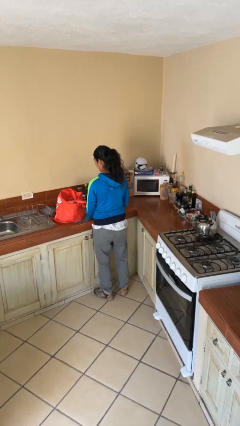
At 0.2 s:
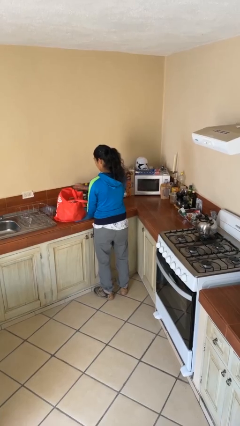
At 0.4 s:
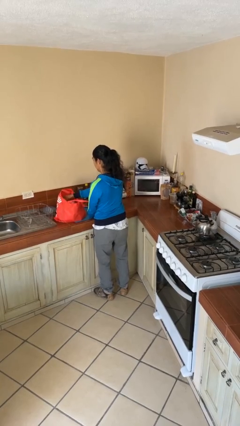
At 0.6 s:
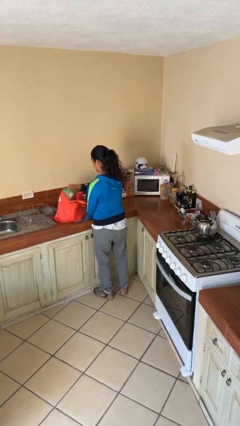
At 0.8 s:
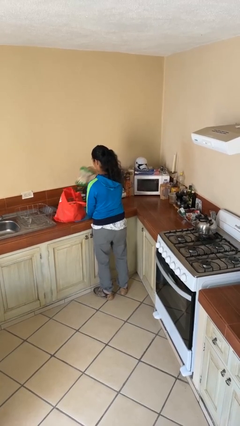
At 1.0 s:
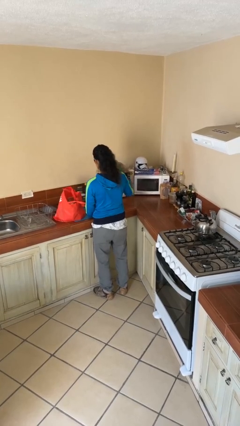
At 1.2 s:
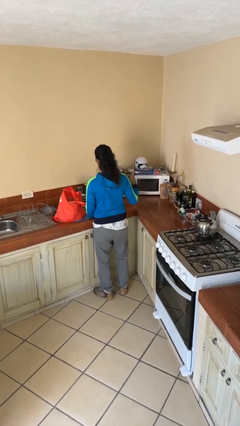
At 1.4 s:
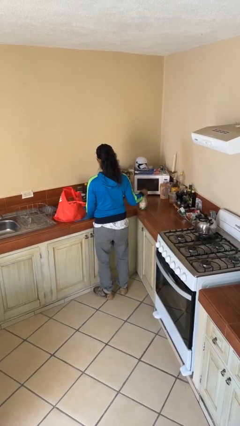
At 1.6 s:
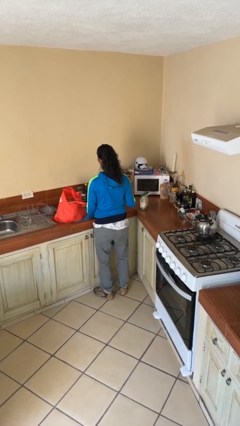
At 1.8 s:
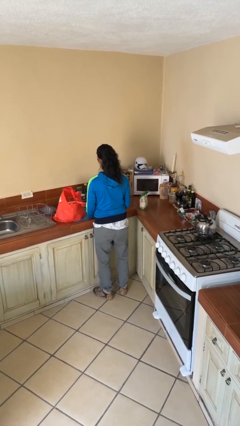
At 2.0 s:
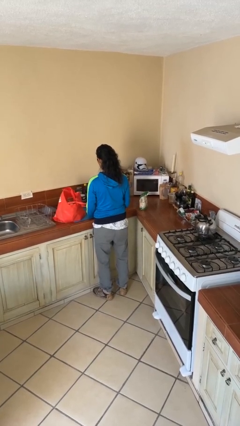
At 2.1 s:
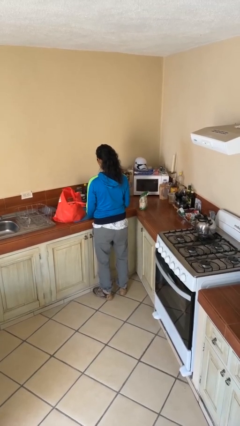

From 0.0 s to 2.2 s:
person takes object from bag

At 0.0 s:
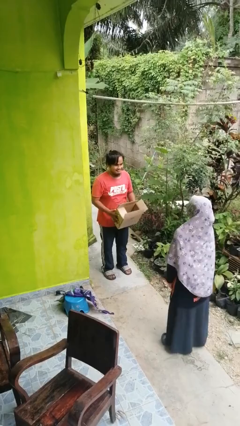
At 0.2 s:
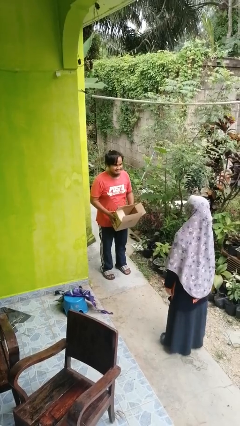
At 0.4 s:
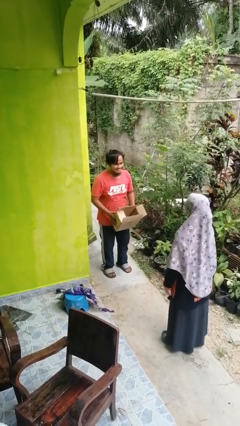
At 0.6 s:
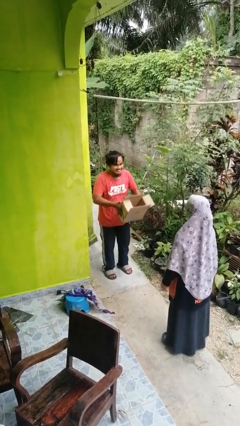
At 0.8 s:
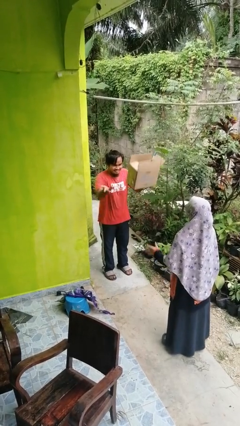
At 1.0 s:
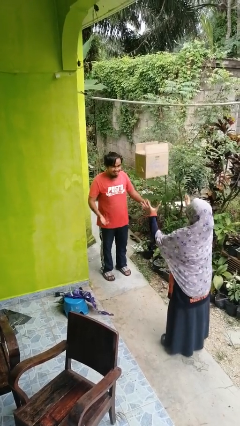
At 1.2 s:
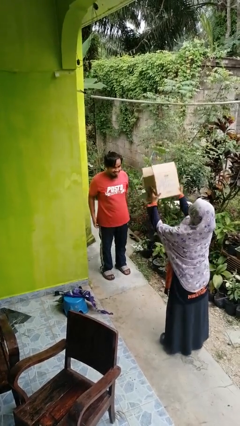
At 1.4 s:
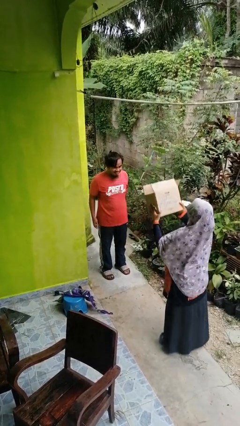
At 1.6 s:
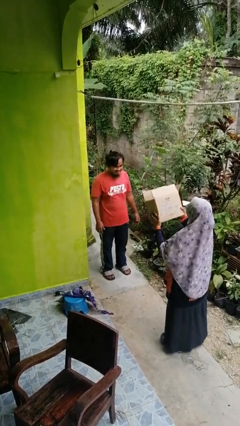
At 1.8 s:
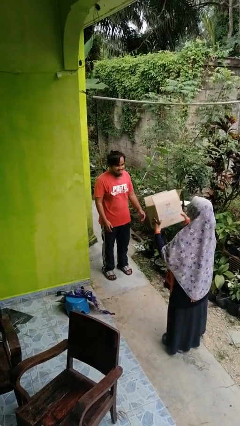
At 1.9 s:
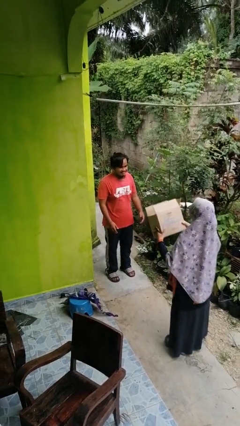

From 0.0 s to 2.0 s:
person throws object to person

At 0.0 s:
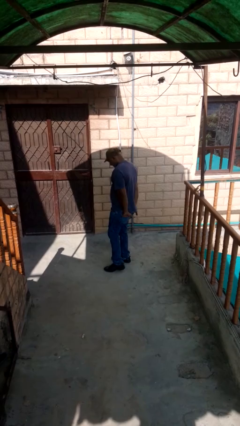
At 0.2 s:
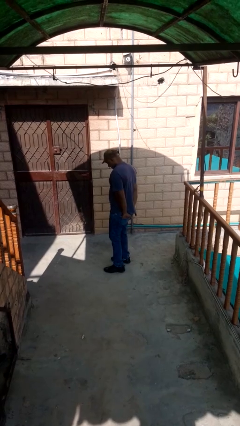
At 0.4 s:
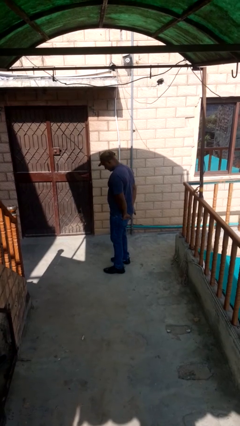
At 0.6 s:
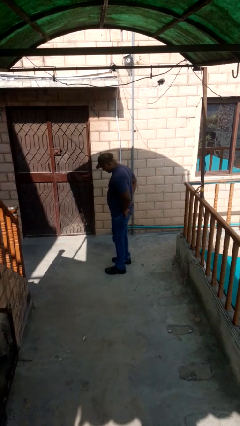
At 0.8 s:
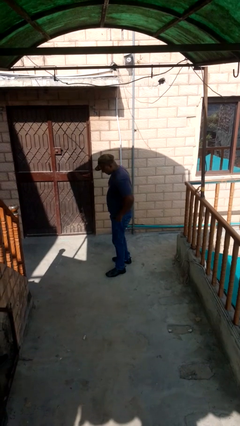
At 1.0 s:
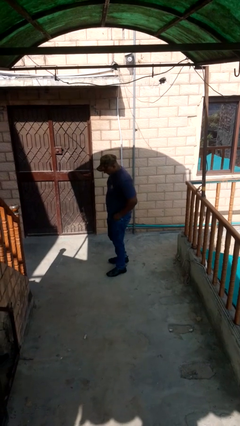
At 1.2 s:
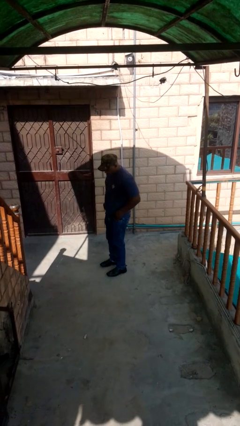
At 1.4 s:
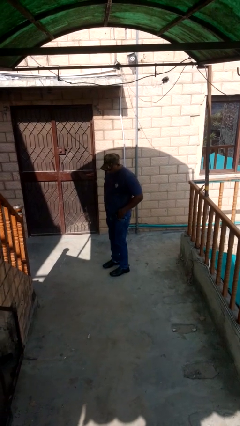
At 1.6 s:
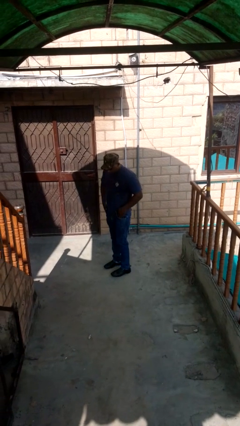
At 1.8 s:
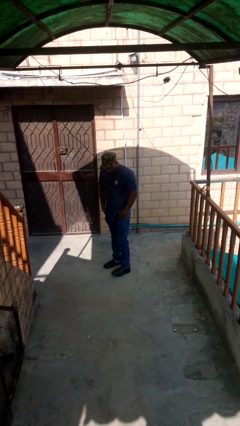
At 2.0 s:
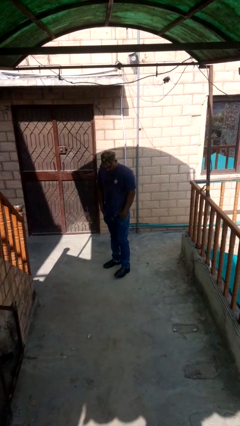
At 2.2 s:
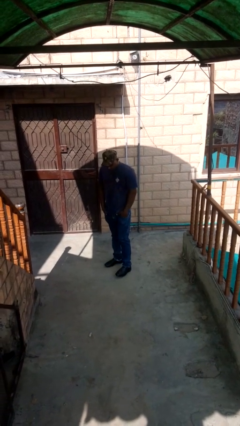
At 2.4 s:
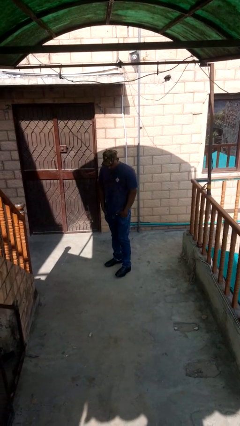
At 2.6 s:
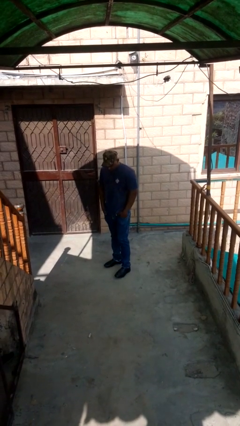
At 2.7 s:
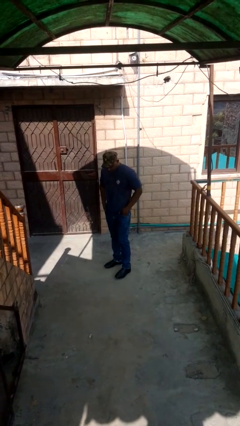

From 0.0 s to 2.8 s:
person puts hands in back pockets

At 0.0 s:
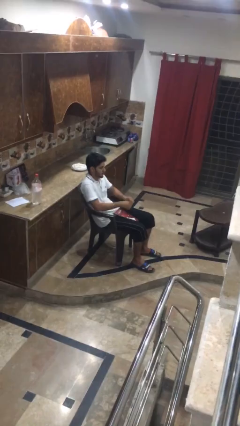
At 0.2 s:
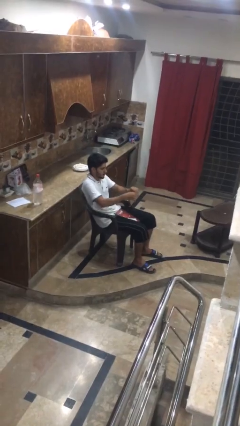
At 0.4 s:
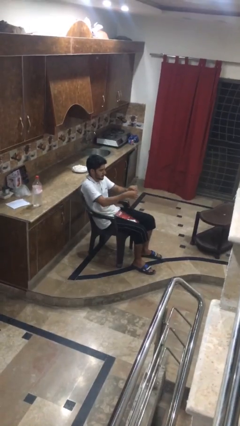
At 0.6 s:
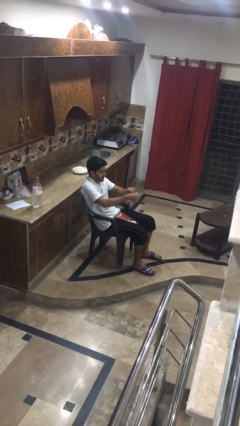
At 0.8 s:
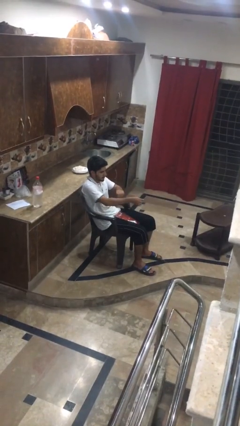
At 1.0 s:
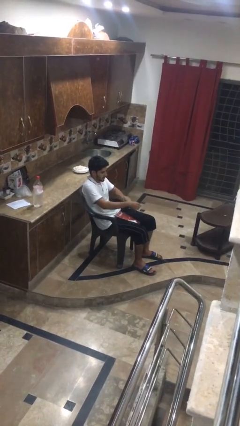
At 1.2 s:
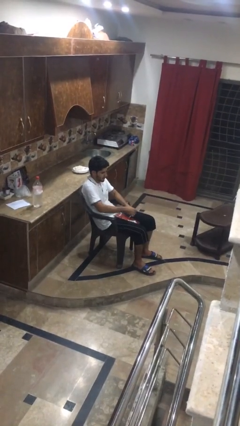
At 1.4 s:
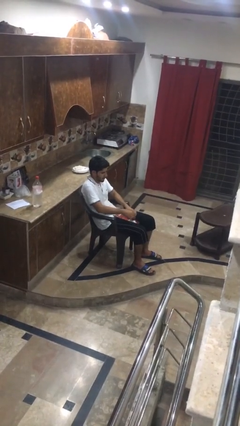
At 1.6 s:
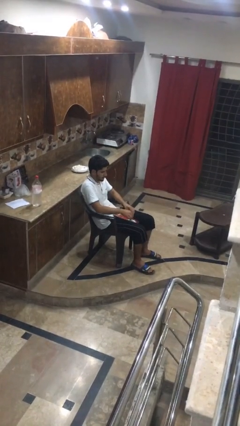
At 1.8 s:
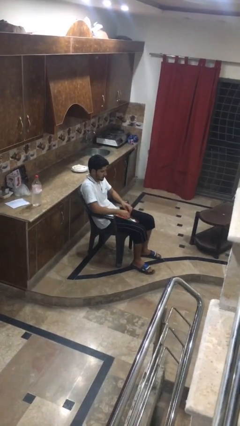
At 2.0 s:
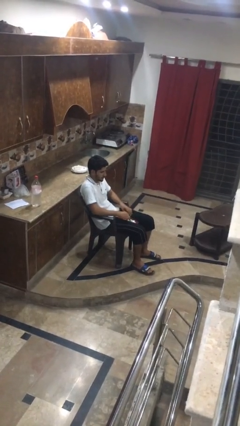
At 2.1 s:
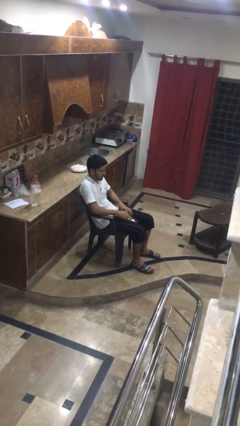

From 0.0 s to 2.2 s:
person tears paper

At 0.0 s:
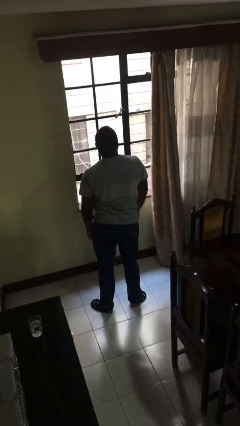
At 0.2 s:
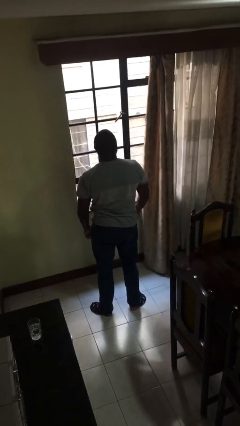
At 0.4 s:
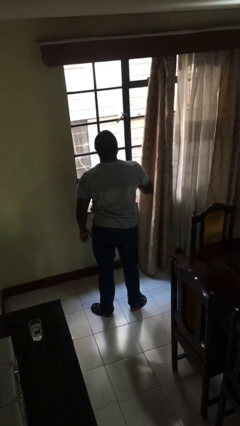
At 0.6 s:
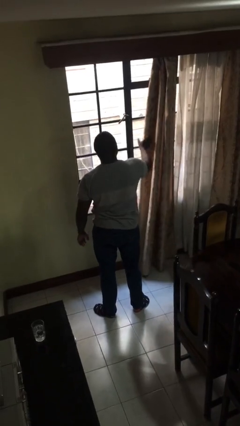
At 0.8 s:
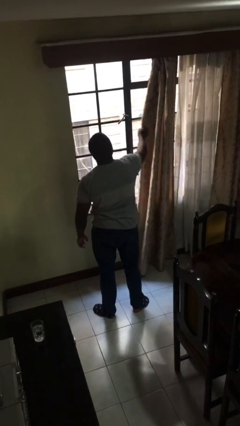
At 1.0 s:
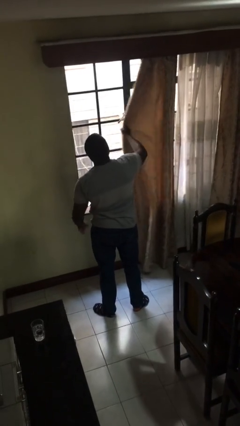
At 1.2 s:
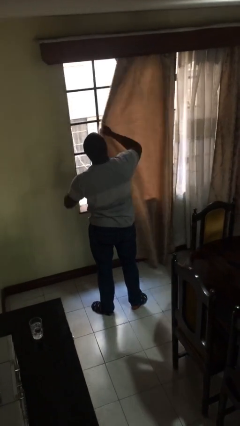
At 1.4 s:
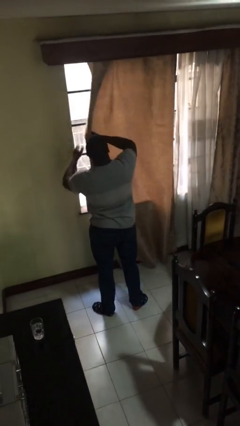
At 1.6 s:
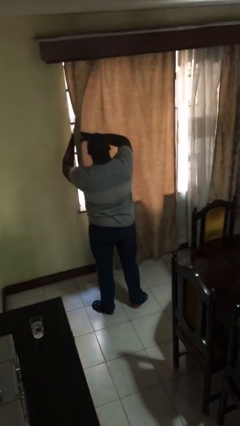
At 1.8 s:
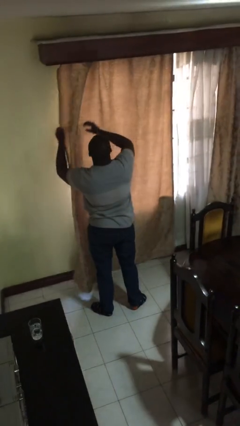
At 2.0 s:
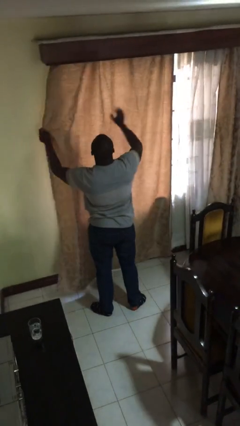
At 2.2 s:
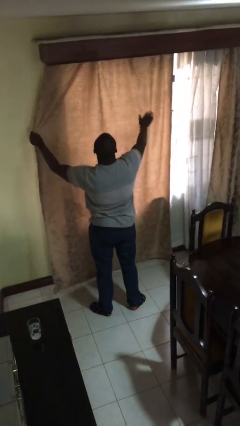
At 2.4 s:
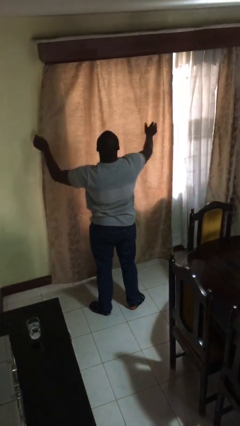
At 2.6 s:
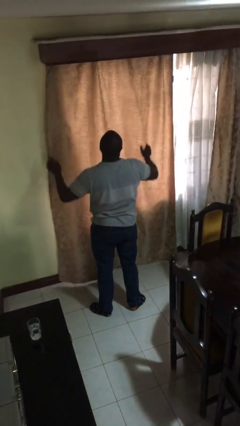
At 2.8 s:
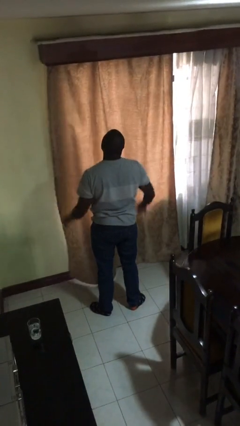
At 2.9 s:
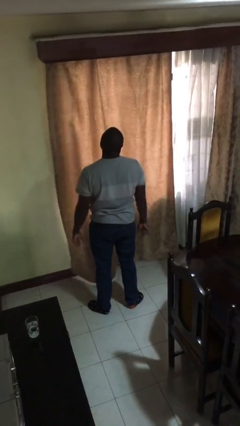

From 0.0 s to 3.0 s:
person closes curtains

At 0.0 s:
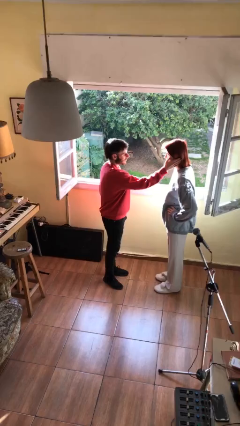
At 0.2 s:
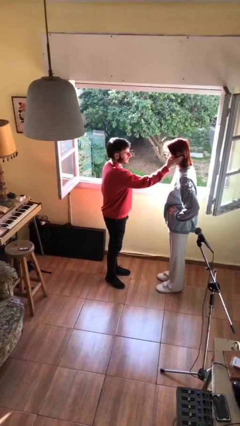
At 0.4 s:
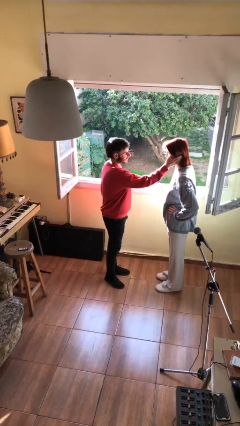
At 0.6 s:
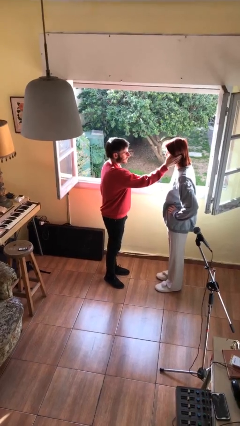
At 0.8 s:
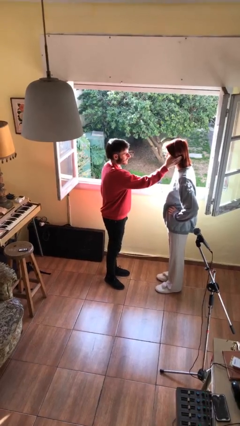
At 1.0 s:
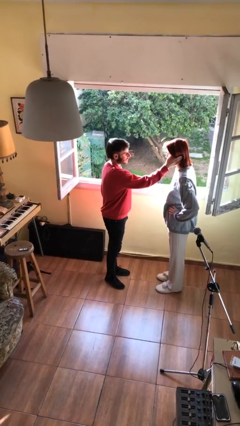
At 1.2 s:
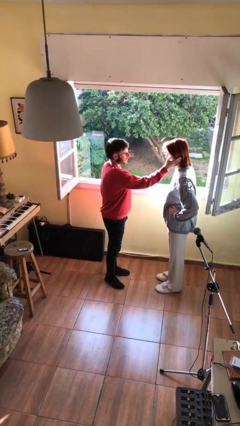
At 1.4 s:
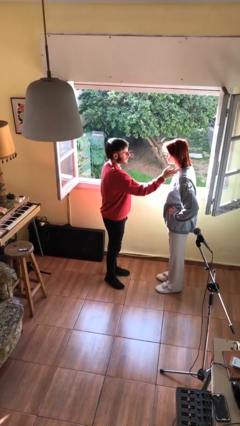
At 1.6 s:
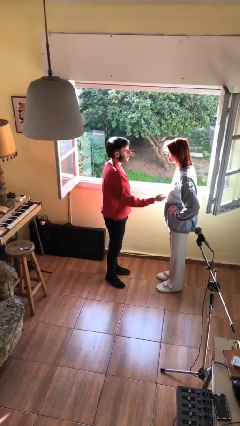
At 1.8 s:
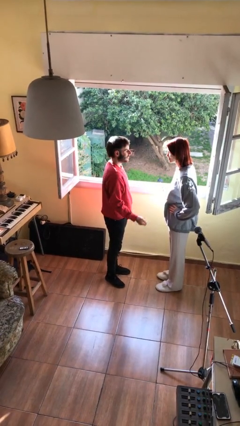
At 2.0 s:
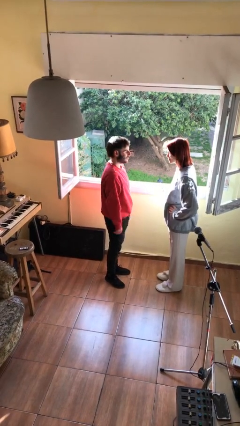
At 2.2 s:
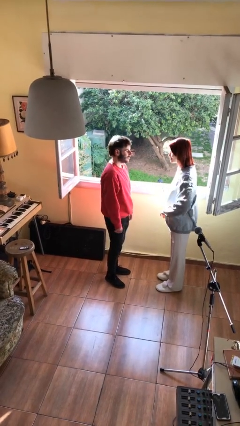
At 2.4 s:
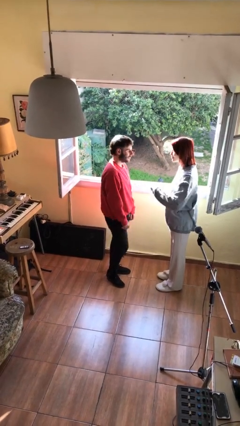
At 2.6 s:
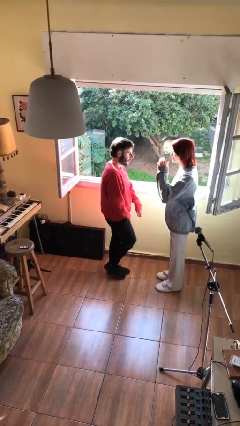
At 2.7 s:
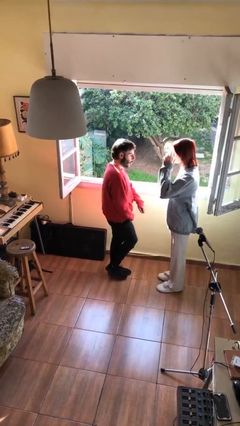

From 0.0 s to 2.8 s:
person touches face of person

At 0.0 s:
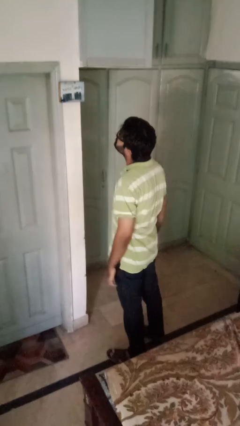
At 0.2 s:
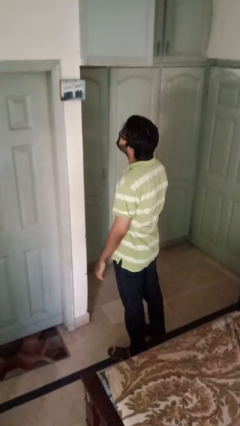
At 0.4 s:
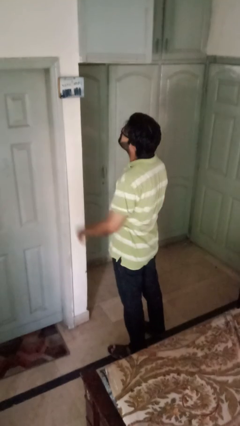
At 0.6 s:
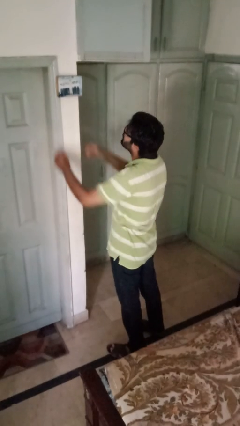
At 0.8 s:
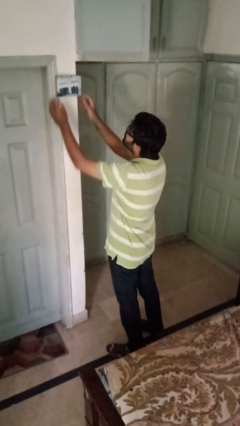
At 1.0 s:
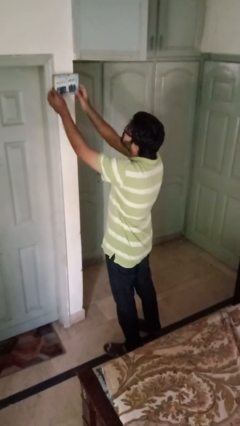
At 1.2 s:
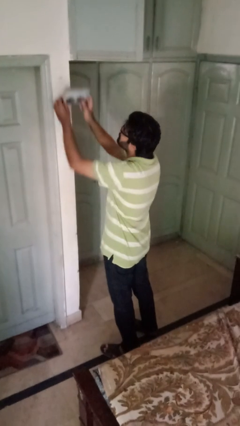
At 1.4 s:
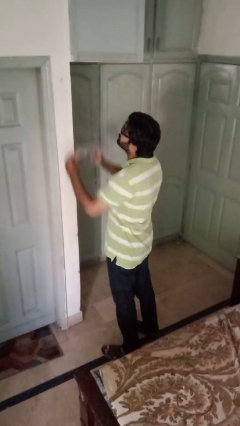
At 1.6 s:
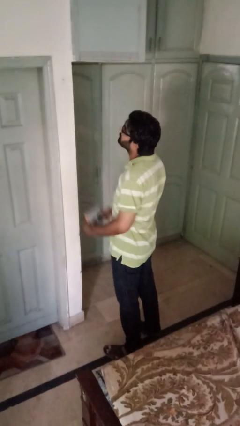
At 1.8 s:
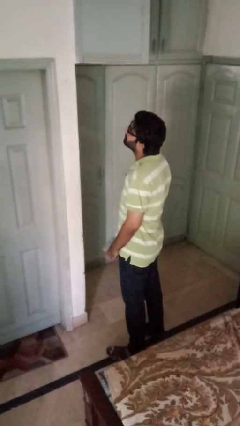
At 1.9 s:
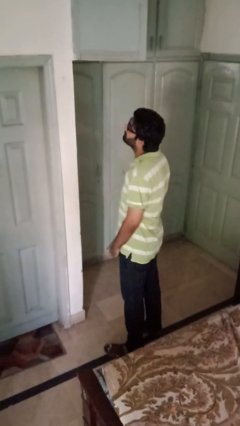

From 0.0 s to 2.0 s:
person takes down picture frame

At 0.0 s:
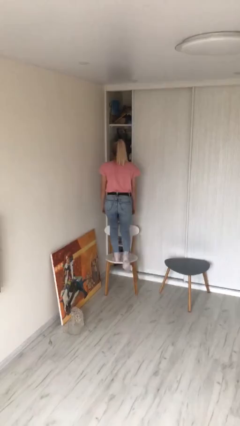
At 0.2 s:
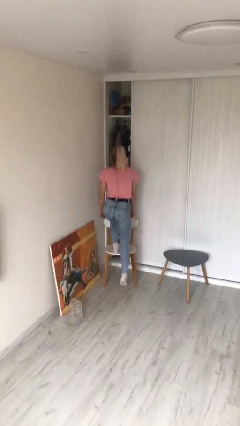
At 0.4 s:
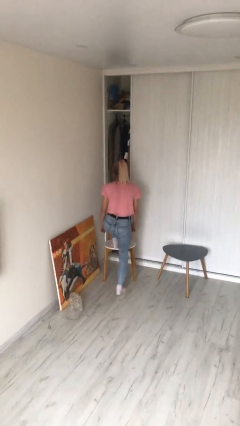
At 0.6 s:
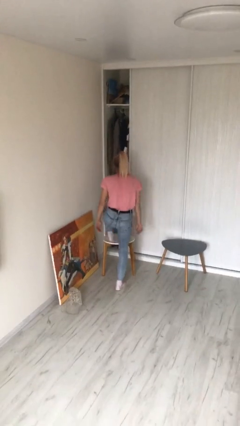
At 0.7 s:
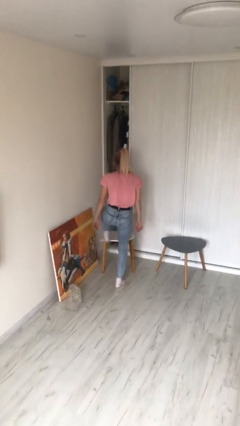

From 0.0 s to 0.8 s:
person climbs off chair
